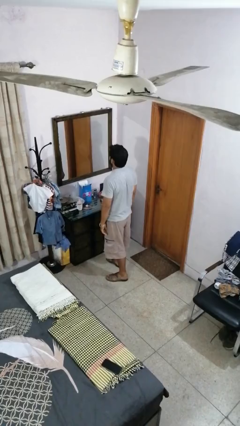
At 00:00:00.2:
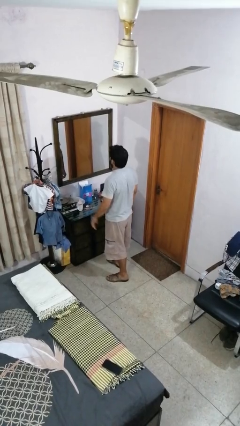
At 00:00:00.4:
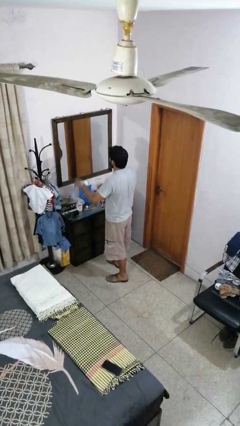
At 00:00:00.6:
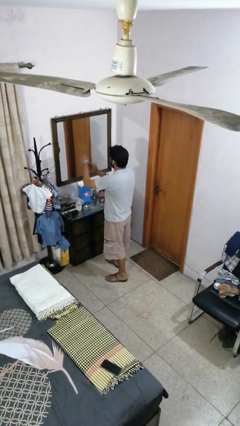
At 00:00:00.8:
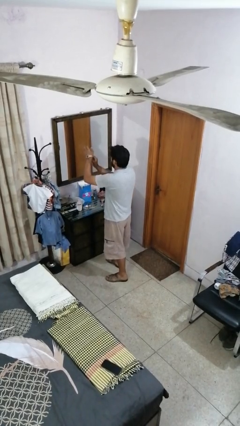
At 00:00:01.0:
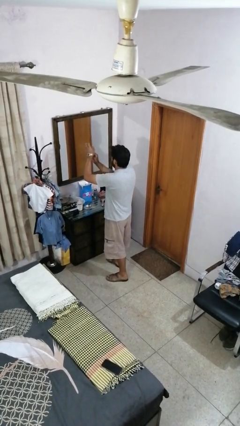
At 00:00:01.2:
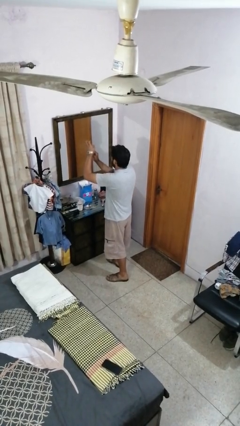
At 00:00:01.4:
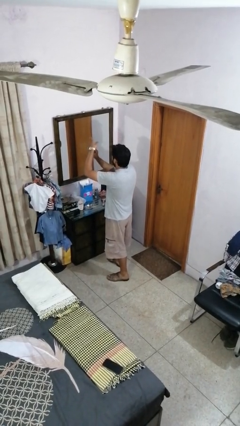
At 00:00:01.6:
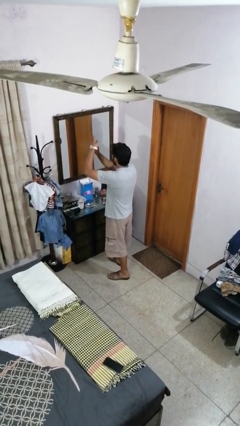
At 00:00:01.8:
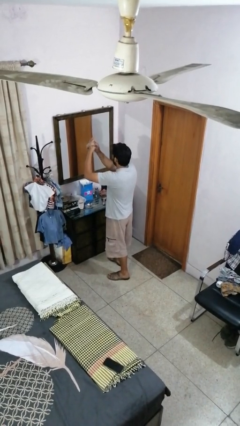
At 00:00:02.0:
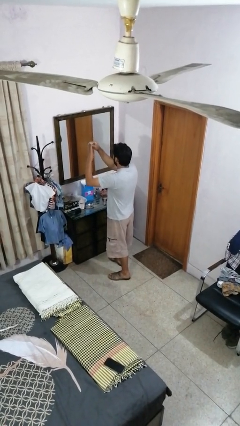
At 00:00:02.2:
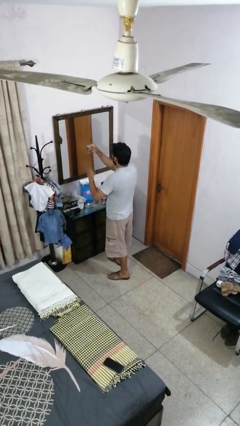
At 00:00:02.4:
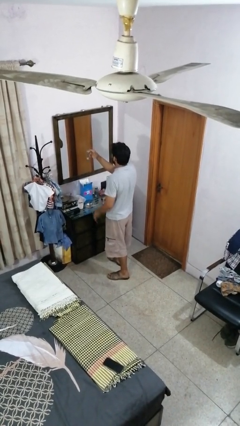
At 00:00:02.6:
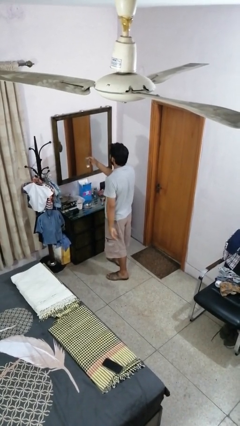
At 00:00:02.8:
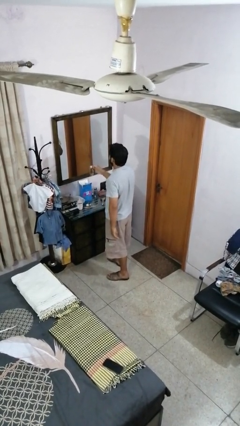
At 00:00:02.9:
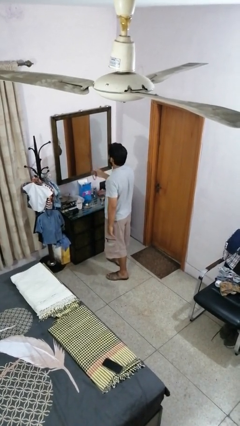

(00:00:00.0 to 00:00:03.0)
person takes off wristwatch

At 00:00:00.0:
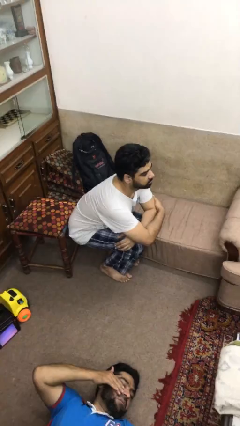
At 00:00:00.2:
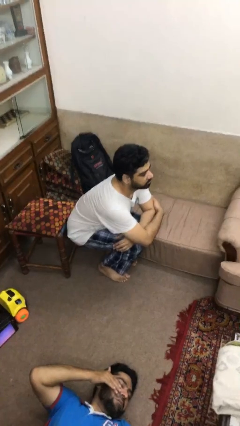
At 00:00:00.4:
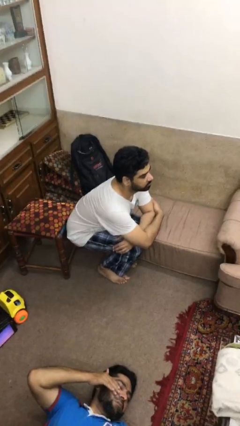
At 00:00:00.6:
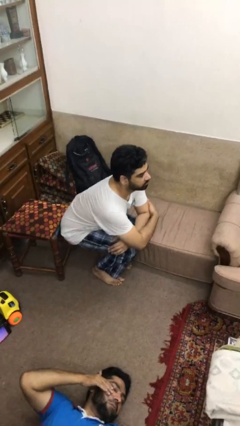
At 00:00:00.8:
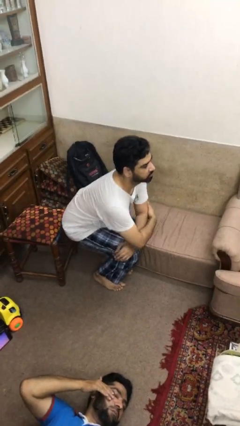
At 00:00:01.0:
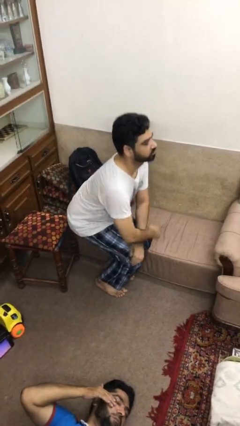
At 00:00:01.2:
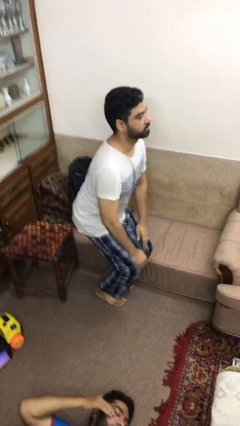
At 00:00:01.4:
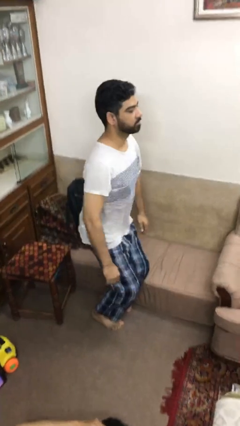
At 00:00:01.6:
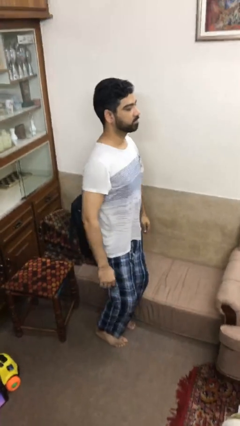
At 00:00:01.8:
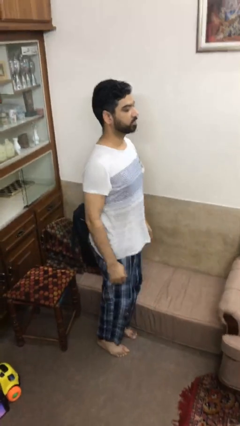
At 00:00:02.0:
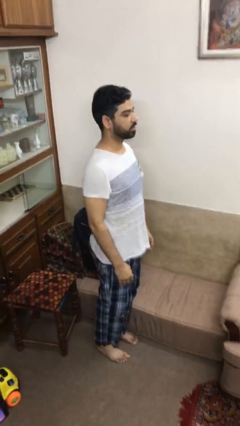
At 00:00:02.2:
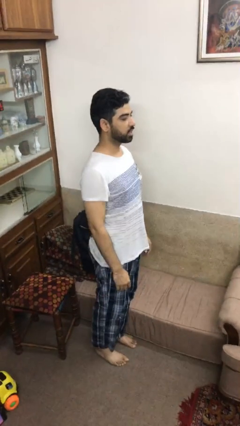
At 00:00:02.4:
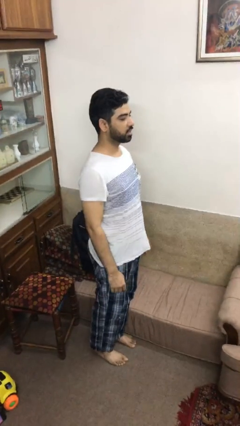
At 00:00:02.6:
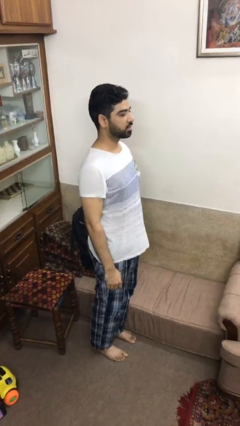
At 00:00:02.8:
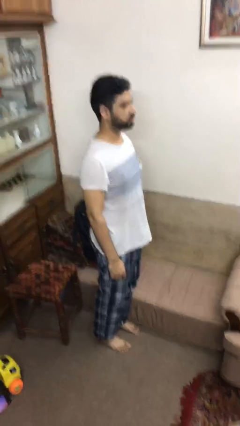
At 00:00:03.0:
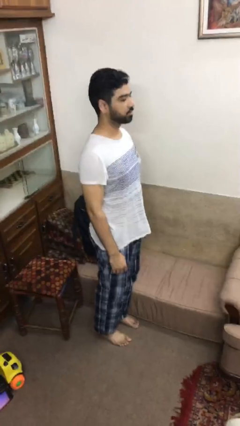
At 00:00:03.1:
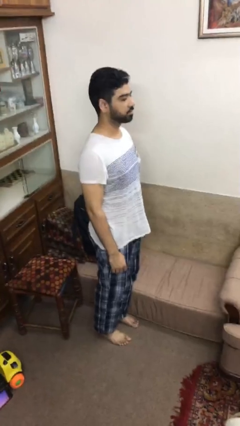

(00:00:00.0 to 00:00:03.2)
person stands up

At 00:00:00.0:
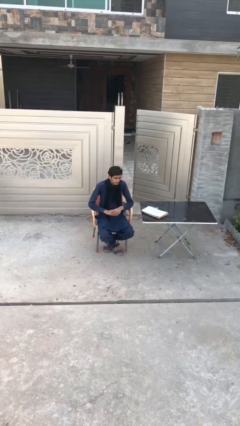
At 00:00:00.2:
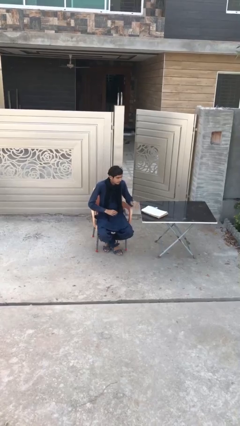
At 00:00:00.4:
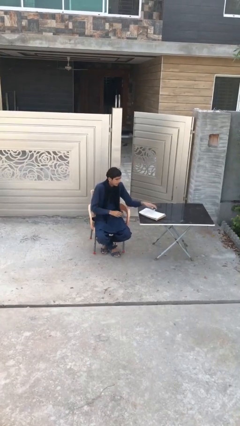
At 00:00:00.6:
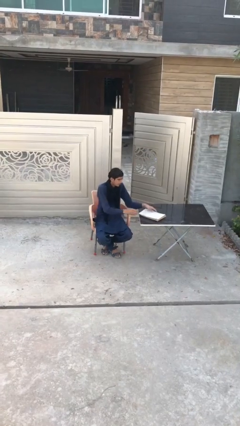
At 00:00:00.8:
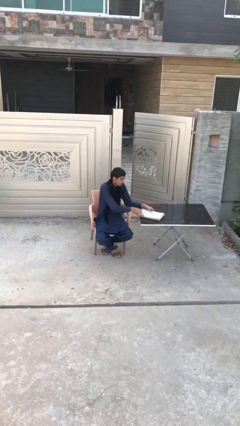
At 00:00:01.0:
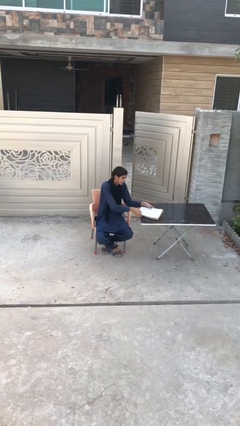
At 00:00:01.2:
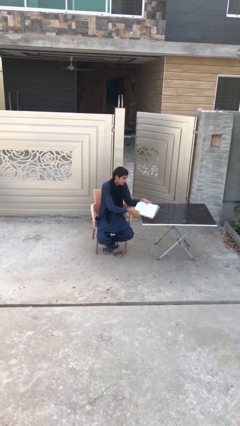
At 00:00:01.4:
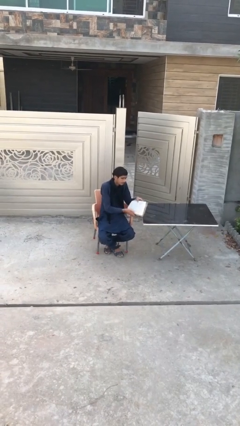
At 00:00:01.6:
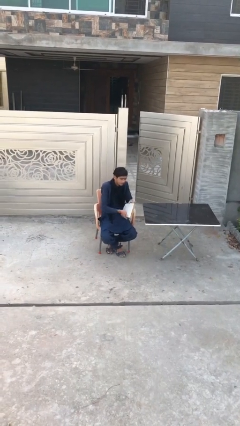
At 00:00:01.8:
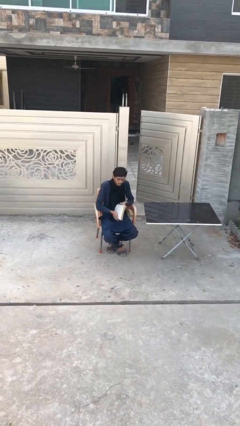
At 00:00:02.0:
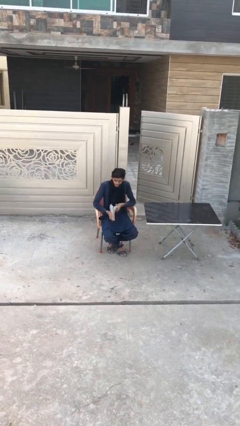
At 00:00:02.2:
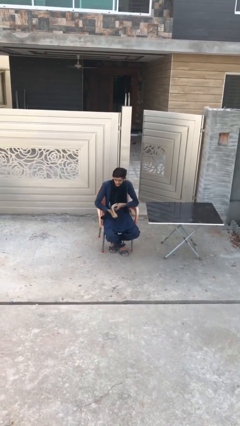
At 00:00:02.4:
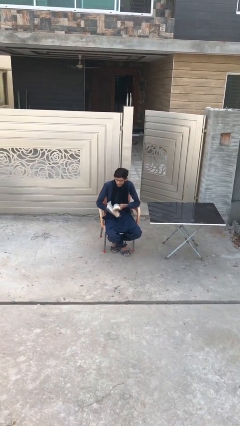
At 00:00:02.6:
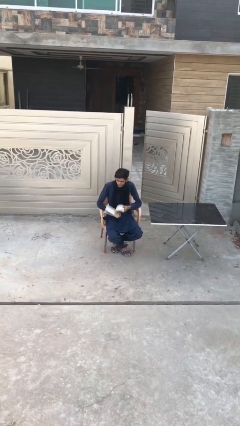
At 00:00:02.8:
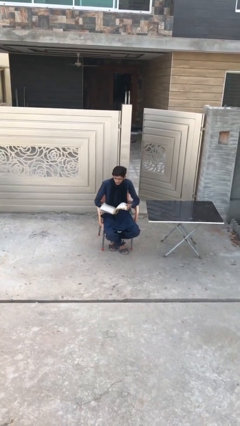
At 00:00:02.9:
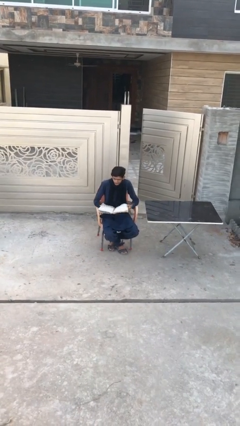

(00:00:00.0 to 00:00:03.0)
person picks up object from table

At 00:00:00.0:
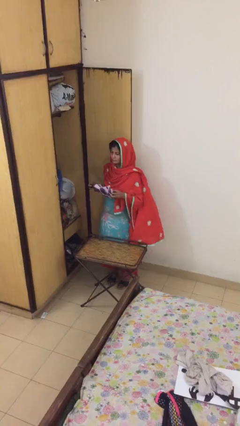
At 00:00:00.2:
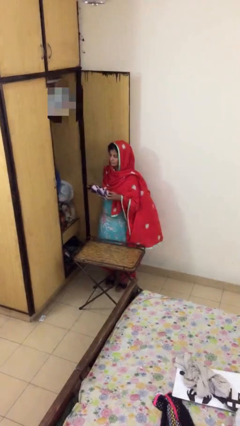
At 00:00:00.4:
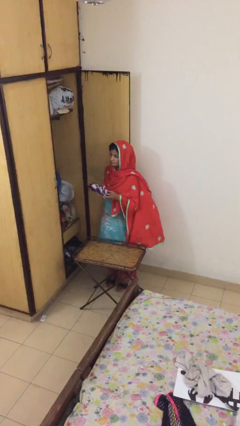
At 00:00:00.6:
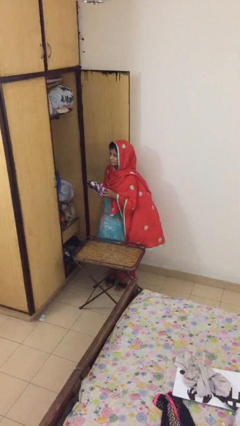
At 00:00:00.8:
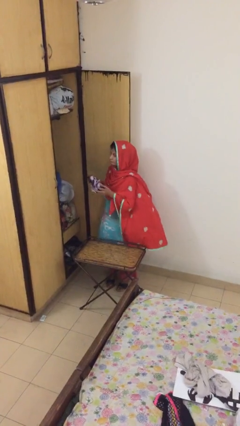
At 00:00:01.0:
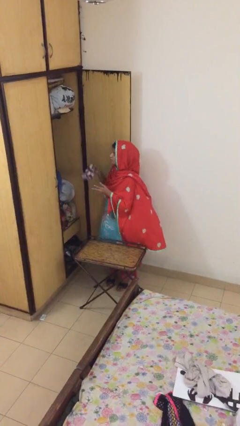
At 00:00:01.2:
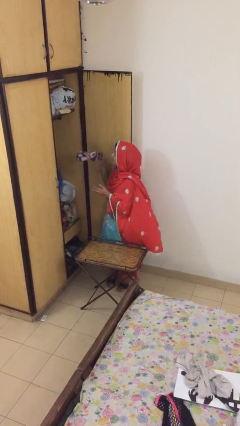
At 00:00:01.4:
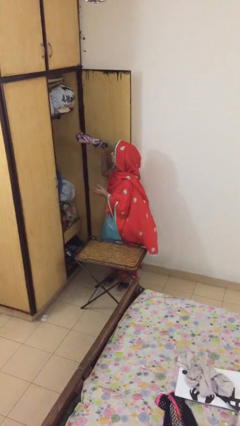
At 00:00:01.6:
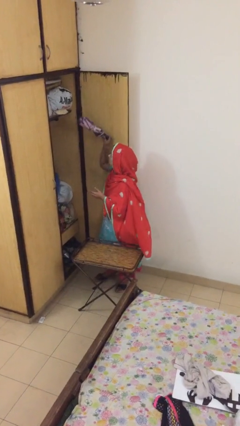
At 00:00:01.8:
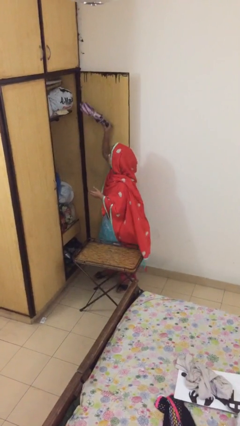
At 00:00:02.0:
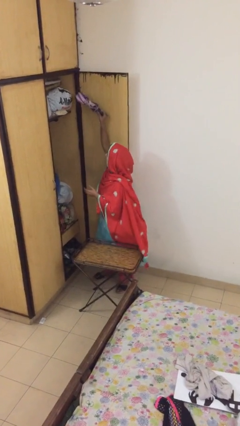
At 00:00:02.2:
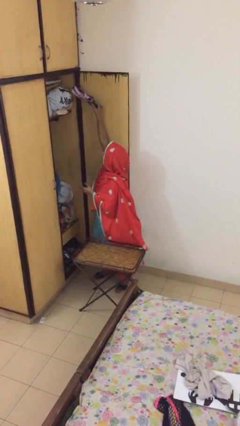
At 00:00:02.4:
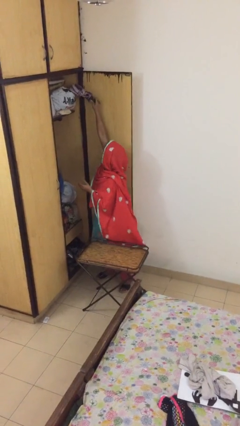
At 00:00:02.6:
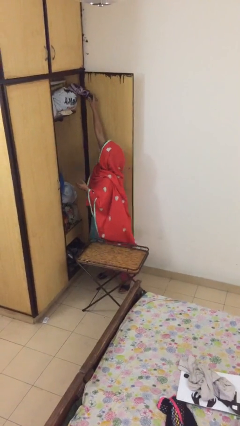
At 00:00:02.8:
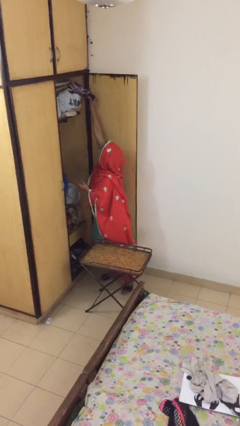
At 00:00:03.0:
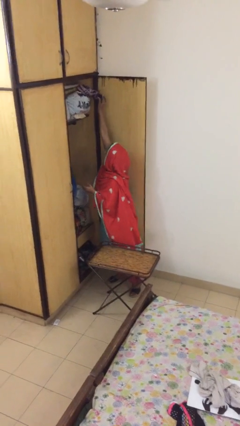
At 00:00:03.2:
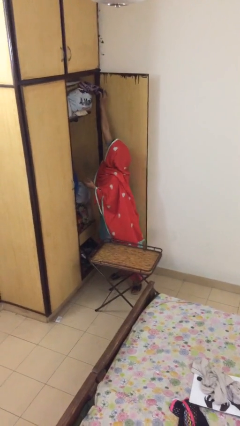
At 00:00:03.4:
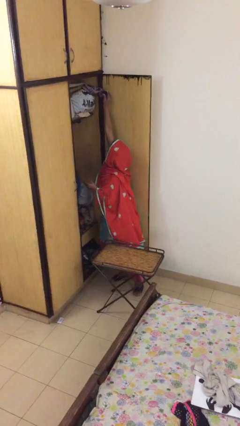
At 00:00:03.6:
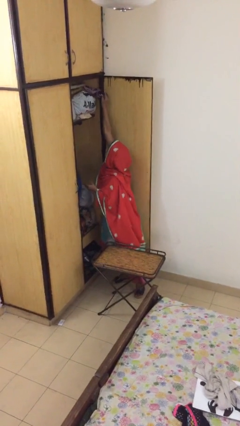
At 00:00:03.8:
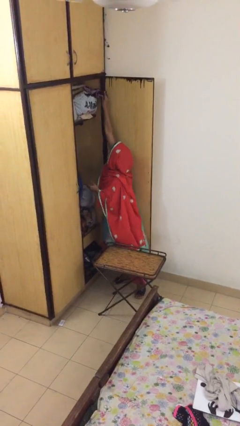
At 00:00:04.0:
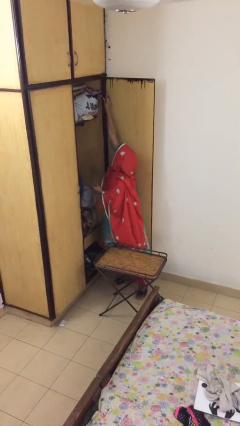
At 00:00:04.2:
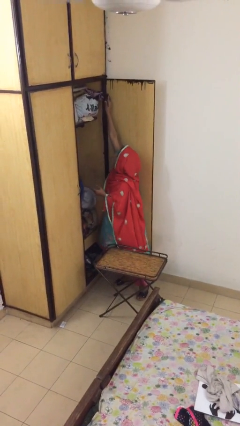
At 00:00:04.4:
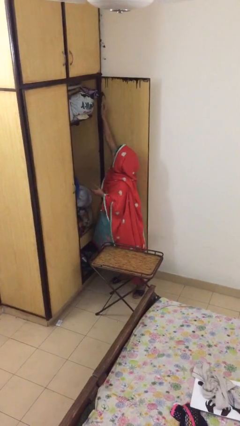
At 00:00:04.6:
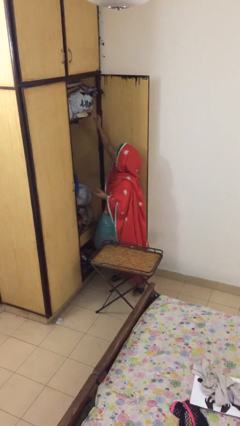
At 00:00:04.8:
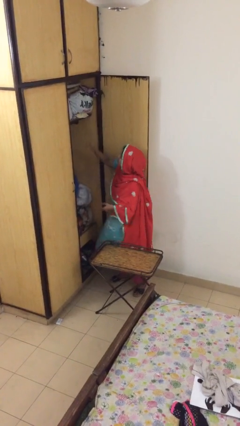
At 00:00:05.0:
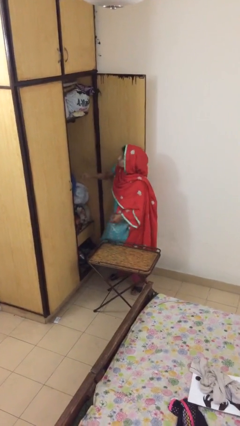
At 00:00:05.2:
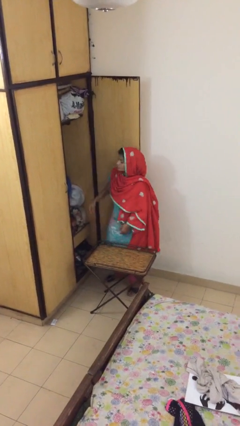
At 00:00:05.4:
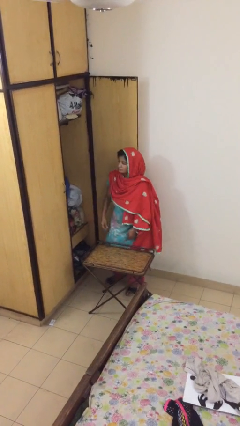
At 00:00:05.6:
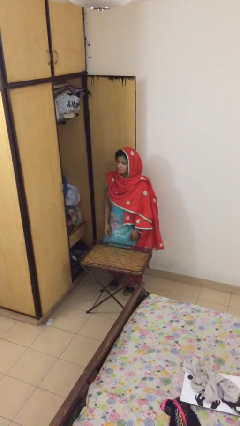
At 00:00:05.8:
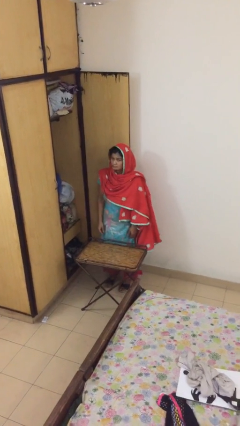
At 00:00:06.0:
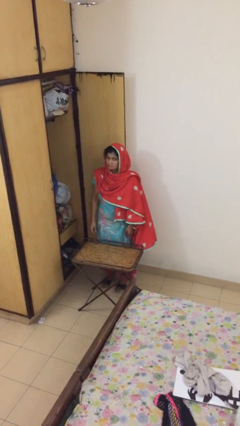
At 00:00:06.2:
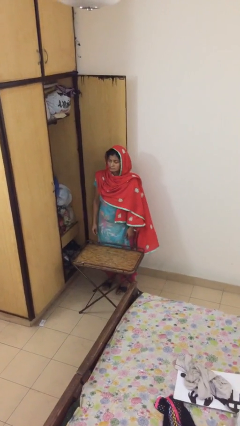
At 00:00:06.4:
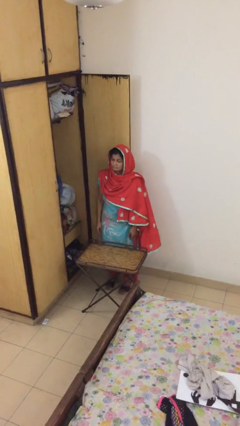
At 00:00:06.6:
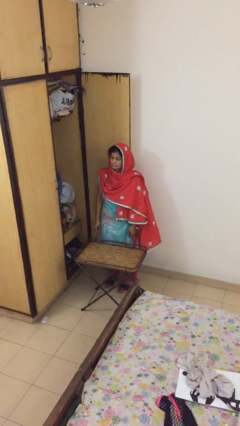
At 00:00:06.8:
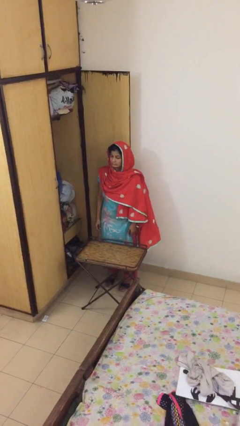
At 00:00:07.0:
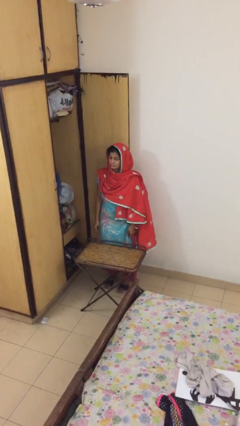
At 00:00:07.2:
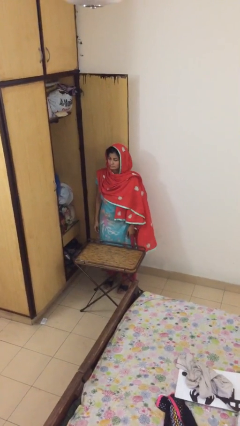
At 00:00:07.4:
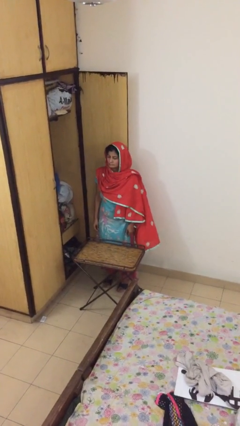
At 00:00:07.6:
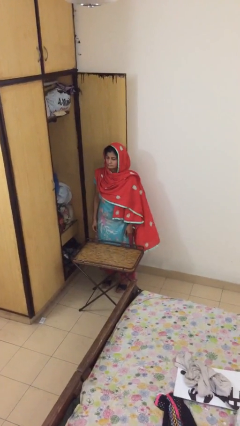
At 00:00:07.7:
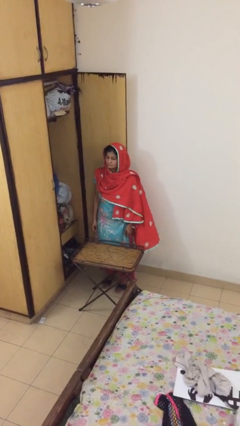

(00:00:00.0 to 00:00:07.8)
person puts down object on shelf

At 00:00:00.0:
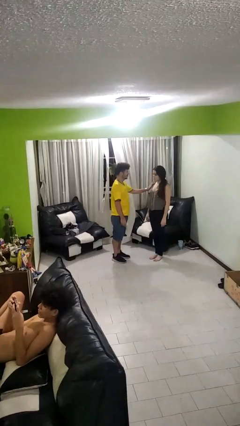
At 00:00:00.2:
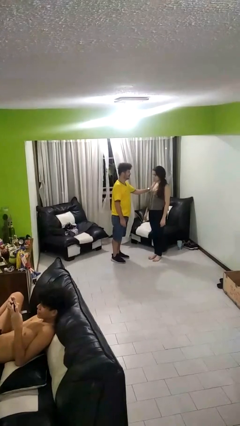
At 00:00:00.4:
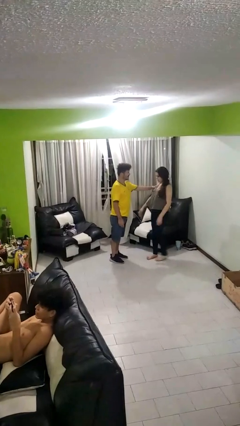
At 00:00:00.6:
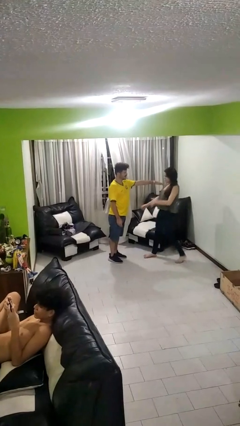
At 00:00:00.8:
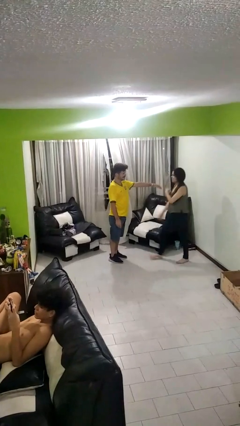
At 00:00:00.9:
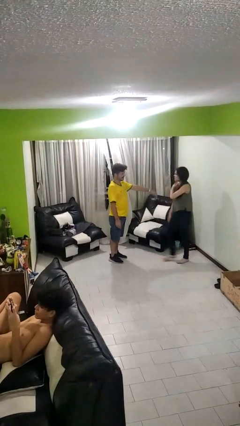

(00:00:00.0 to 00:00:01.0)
person shoves person
